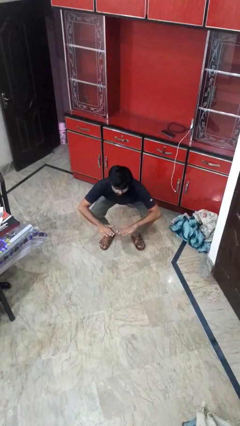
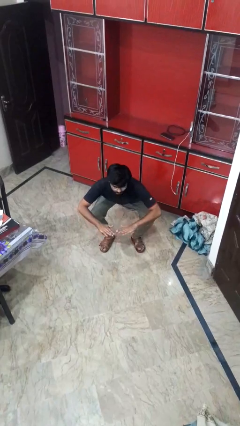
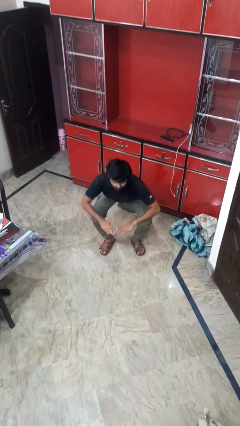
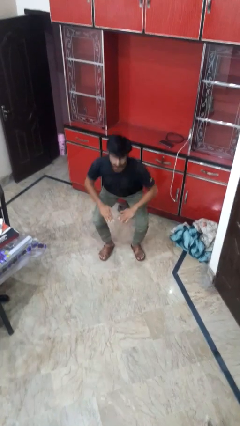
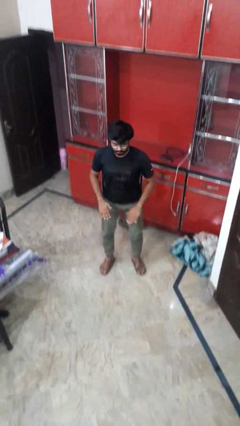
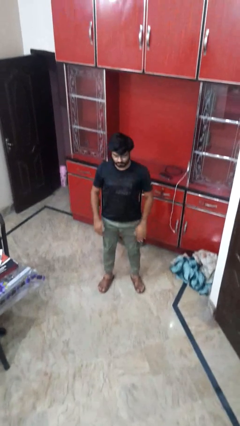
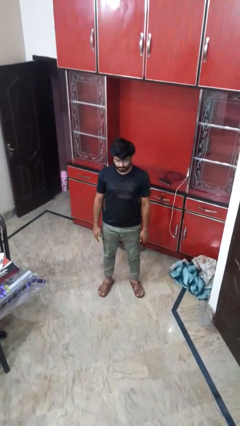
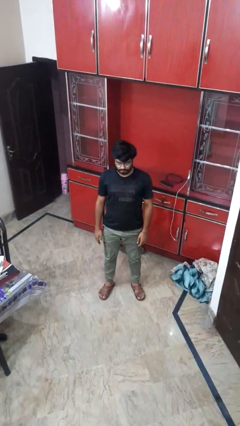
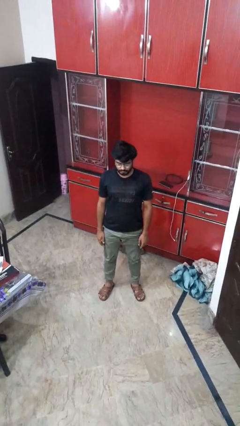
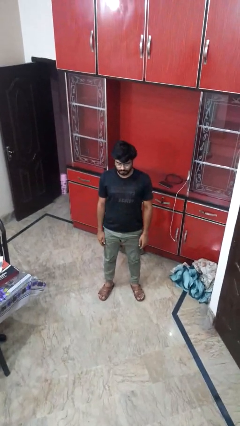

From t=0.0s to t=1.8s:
person stands up

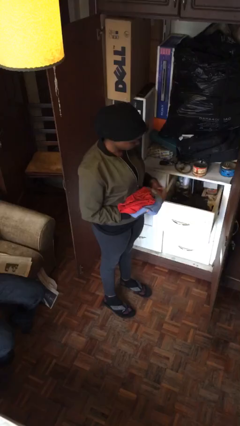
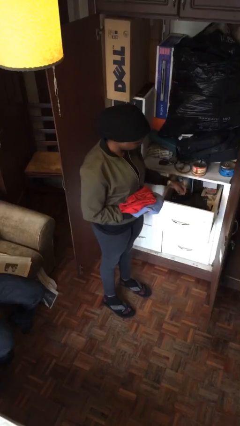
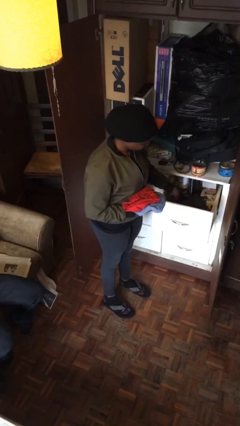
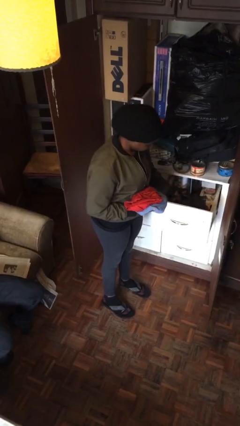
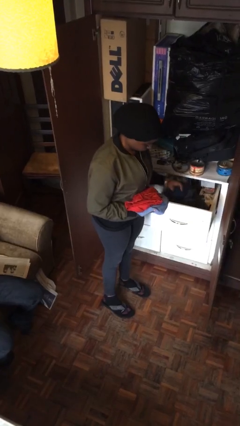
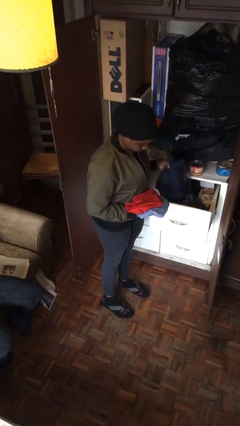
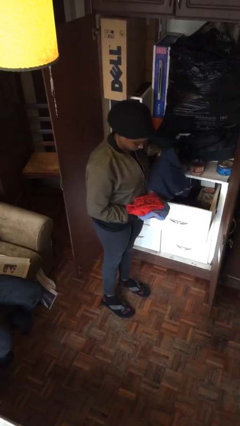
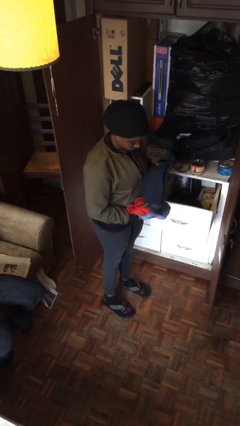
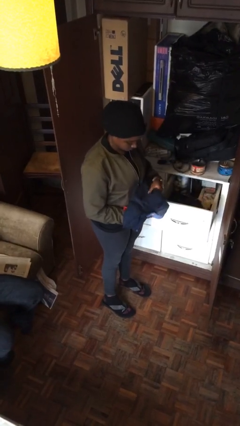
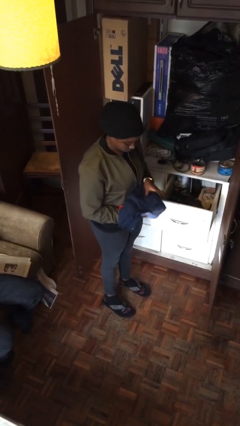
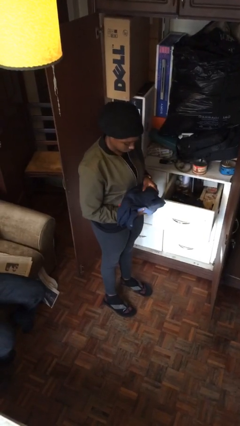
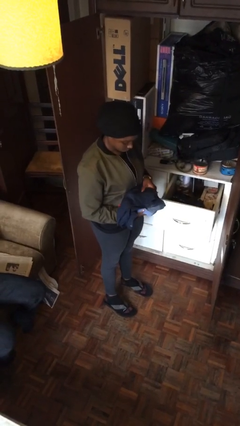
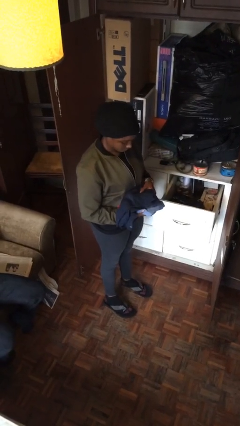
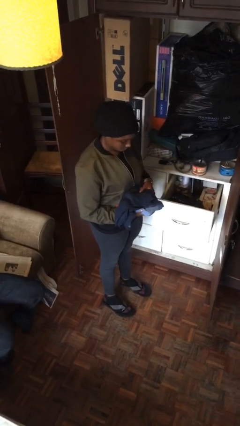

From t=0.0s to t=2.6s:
person takes clothes from dresser

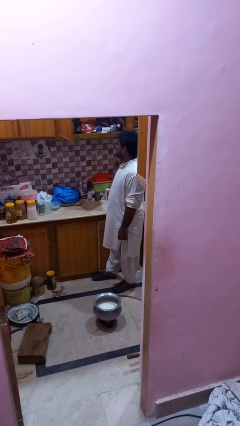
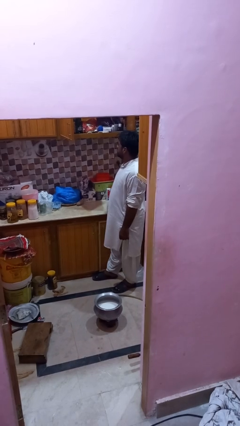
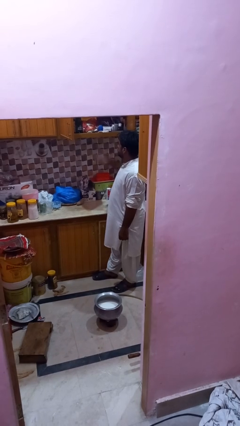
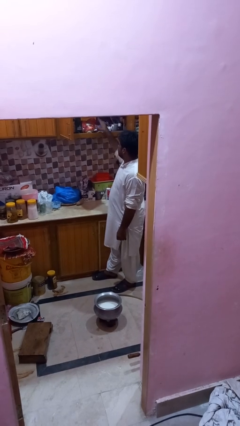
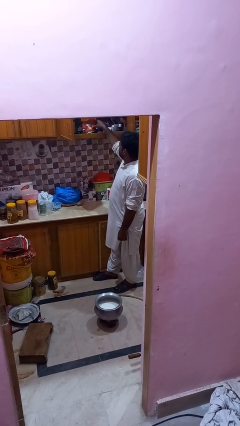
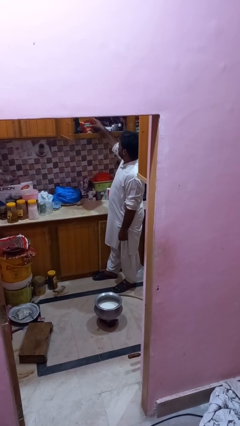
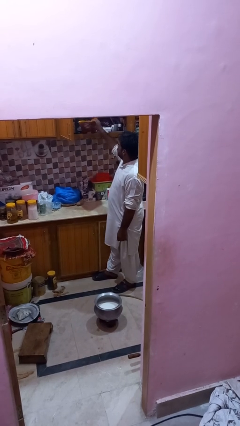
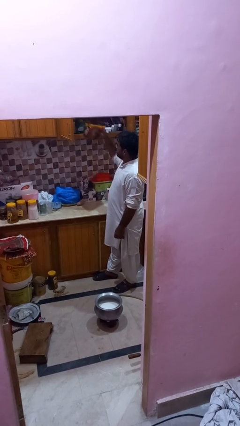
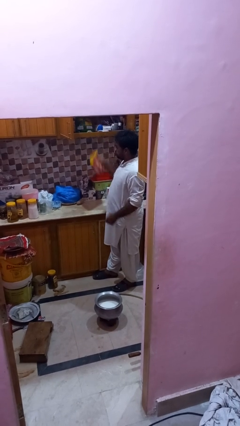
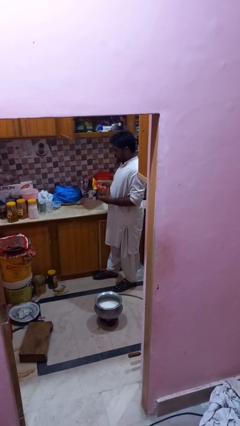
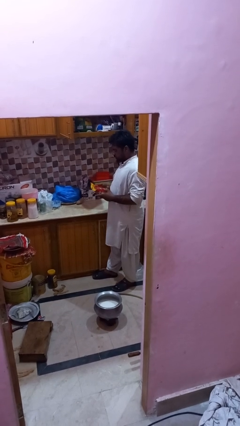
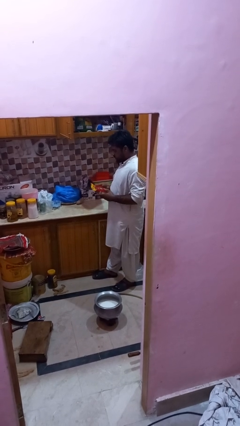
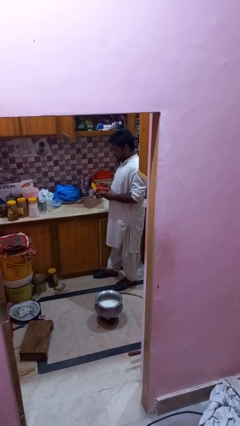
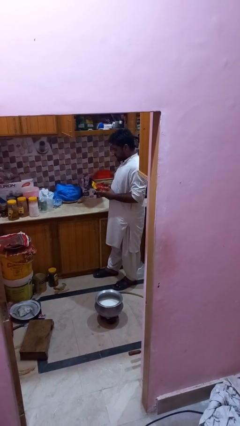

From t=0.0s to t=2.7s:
person picks up object from cabinet

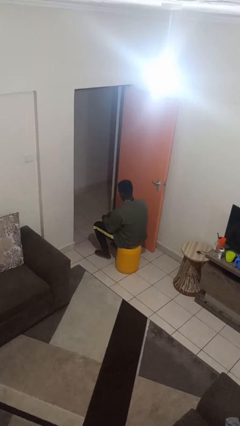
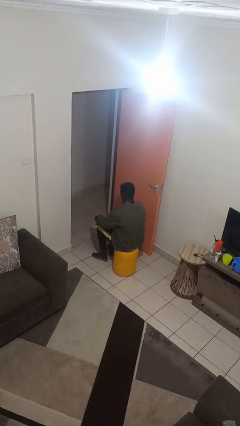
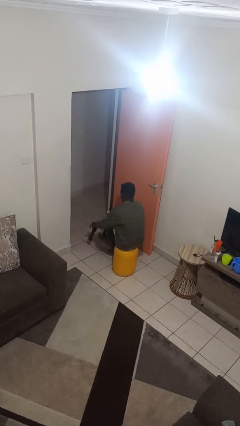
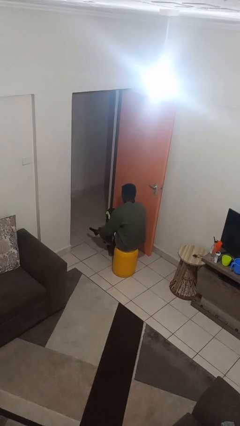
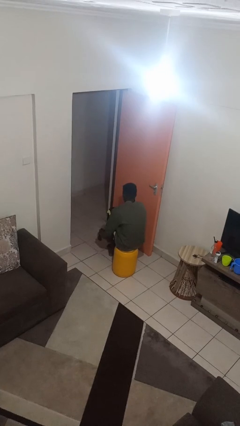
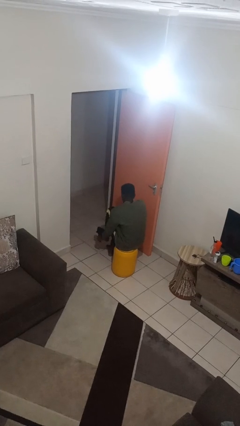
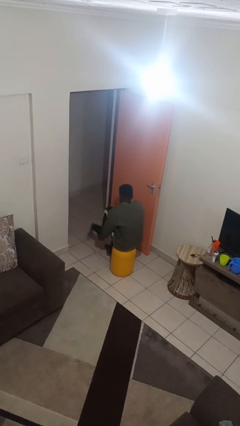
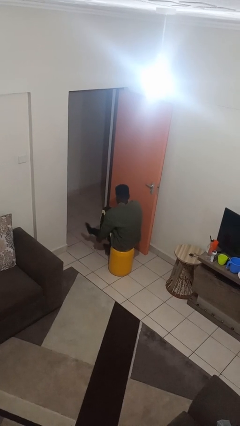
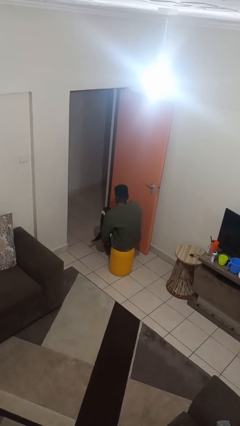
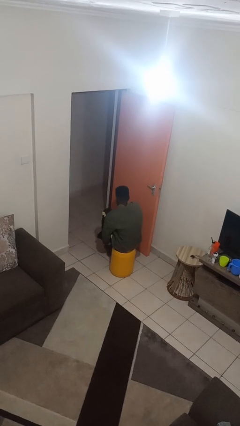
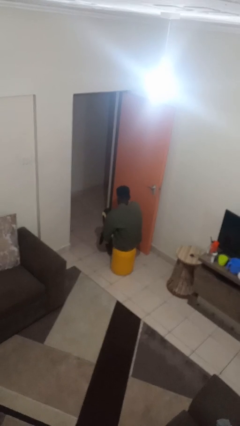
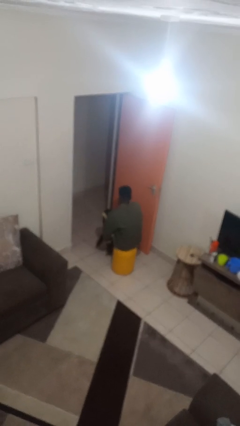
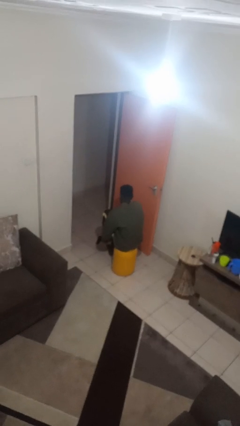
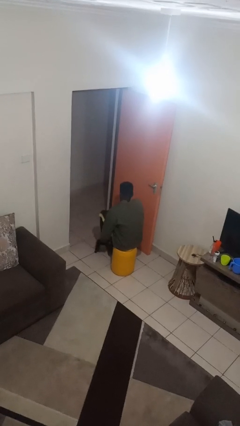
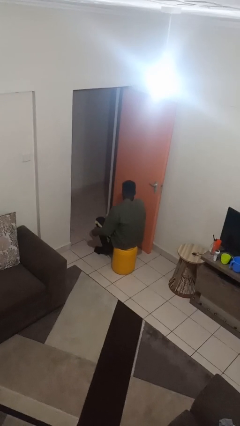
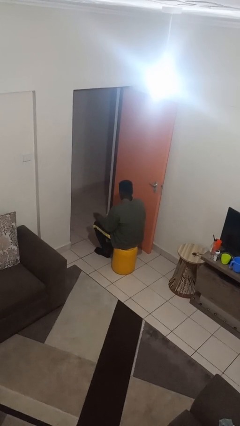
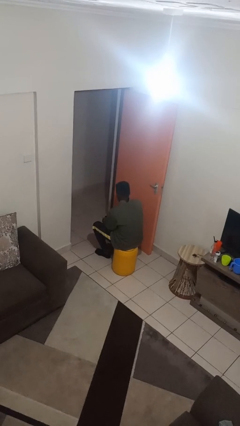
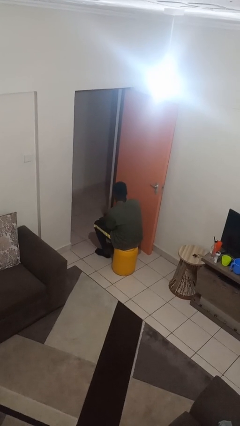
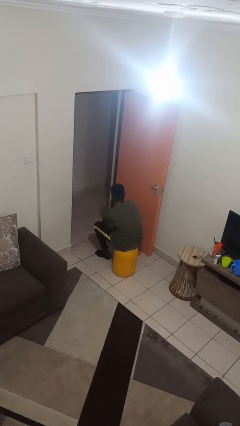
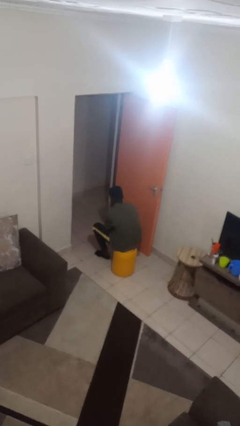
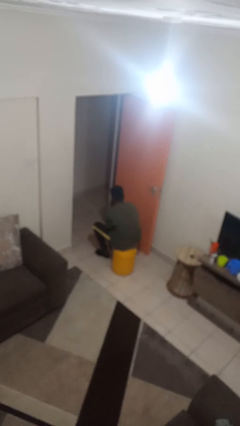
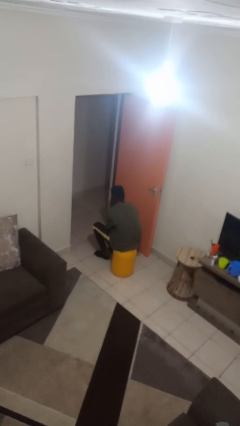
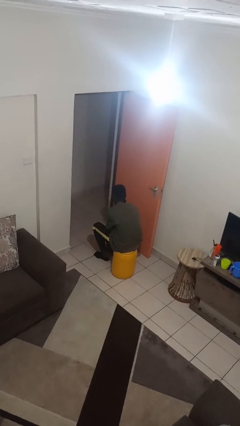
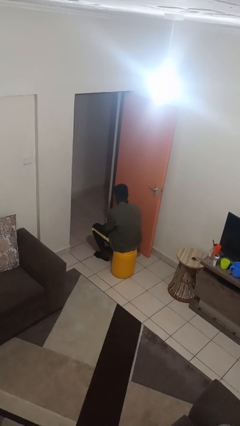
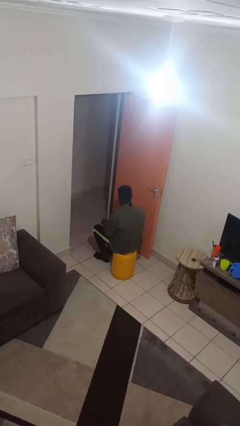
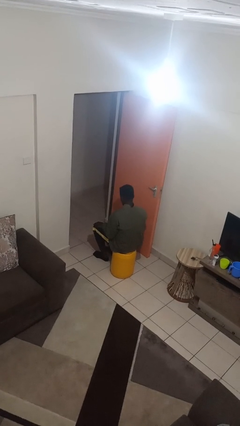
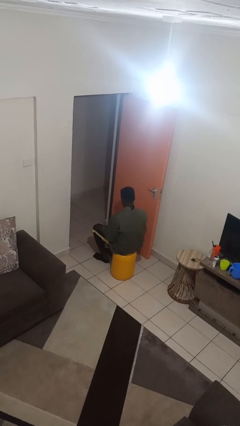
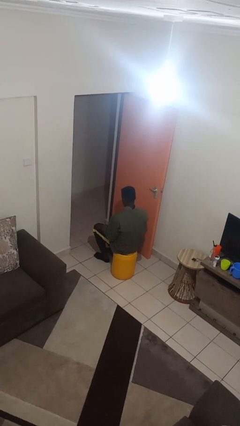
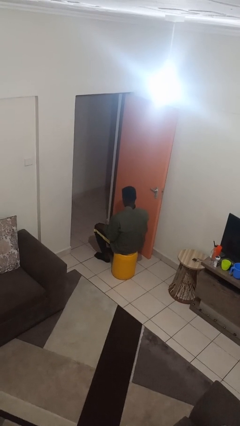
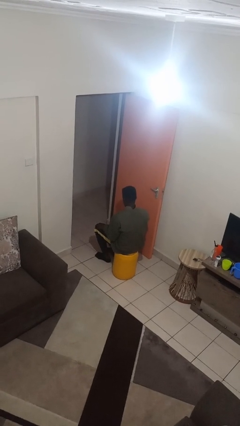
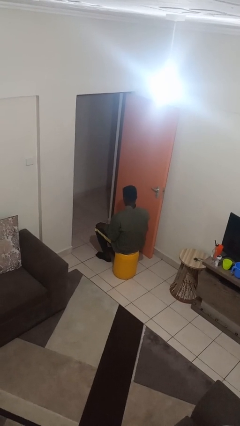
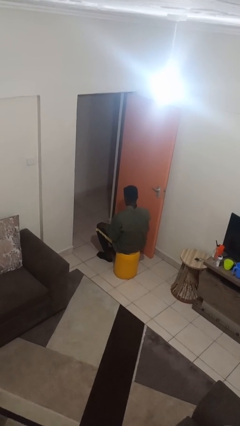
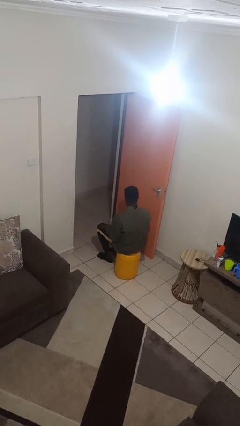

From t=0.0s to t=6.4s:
person puts on socks

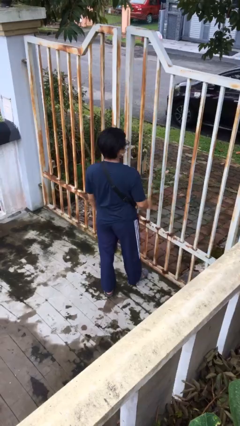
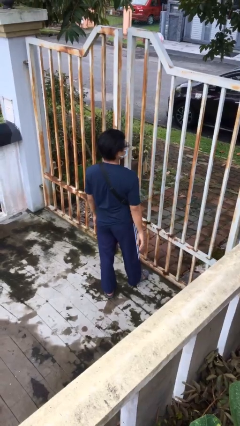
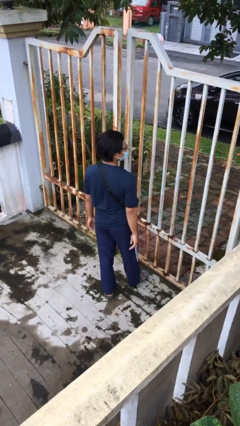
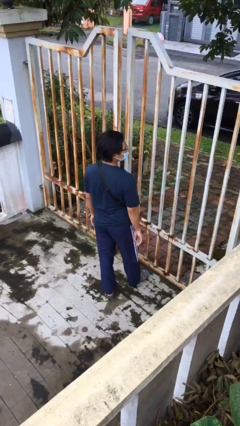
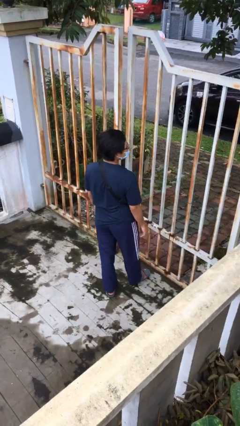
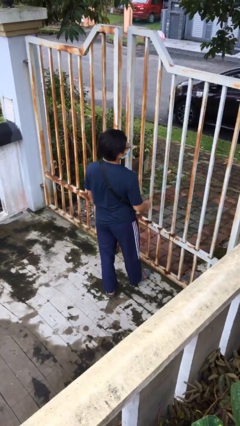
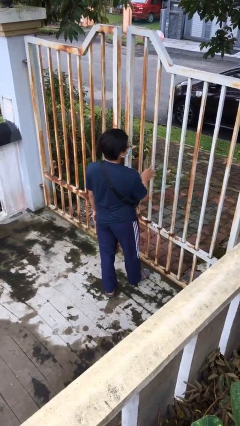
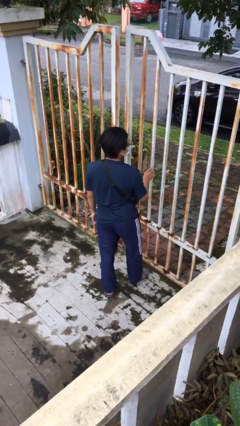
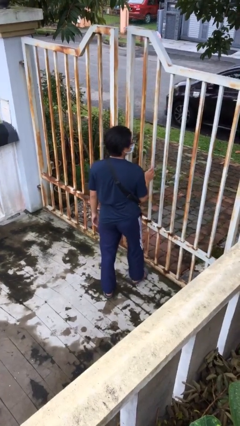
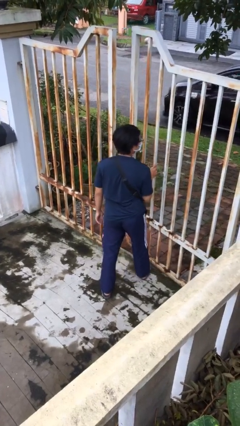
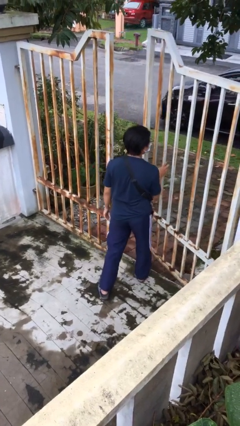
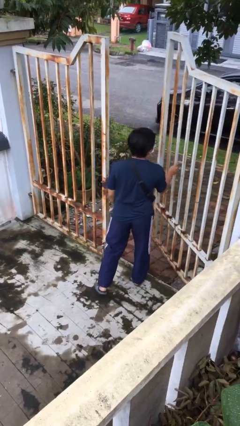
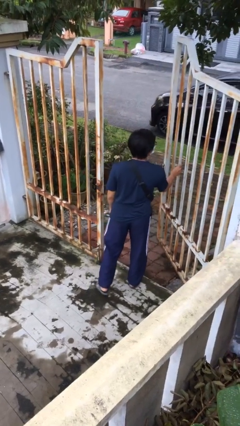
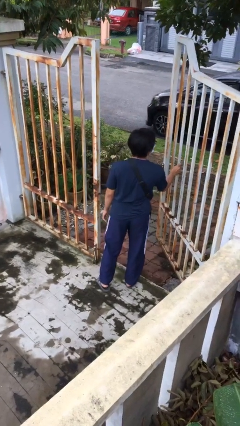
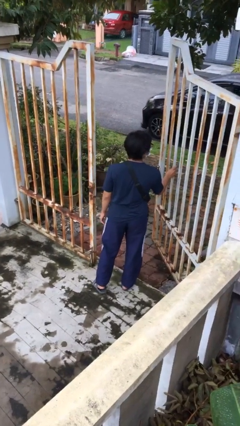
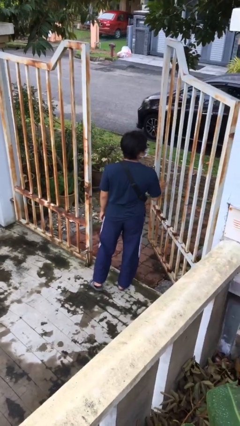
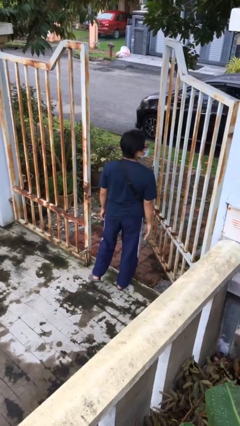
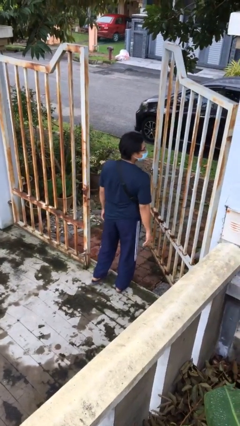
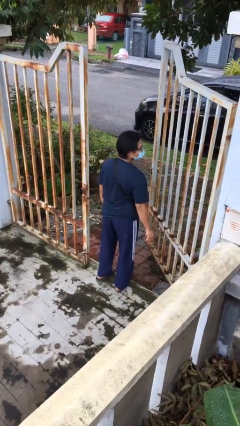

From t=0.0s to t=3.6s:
person opens facility door

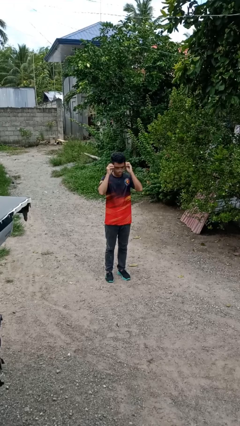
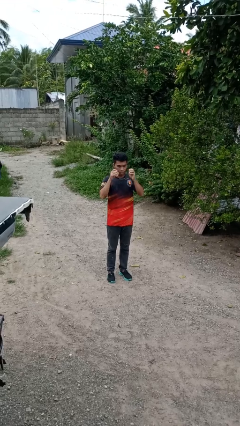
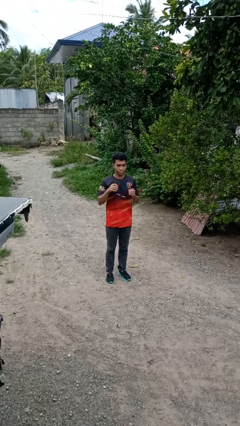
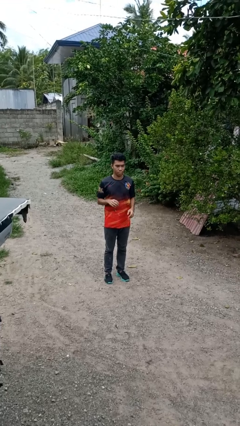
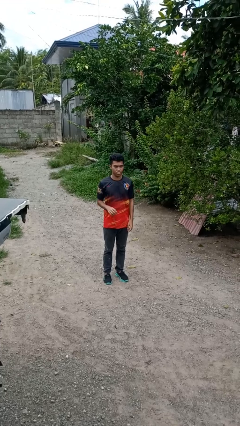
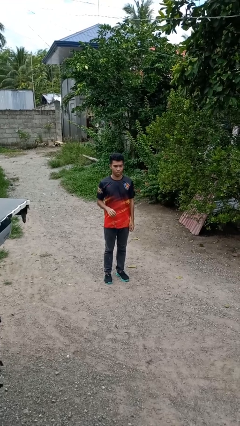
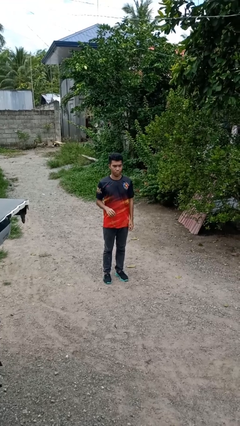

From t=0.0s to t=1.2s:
person takes off glasses
